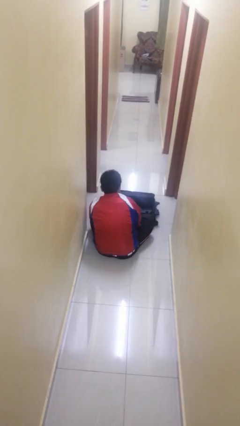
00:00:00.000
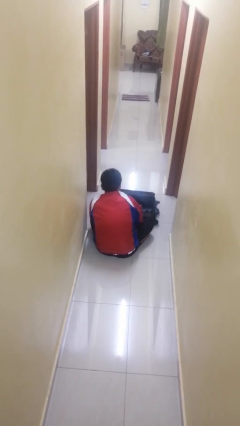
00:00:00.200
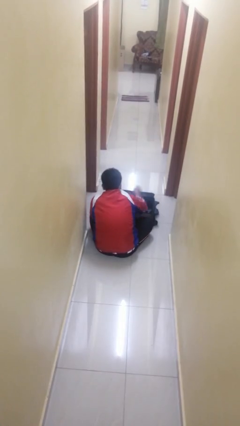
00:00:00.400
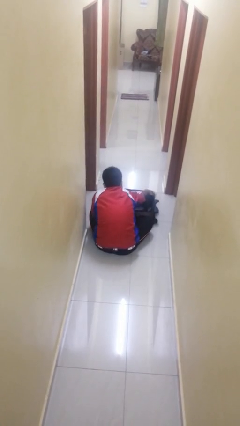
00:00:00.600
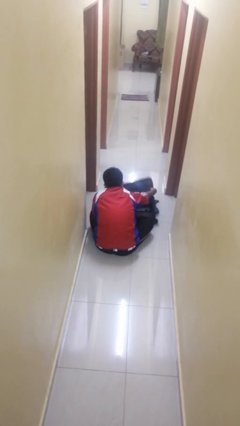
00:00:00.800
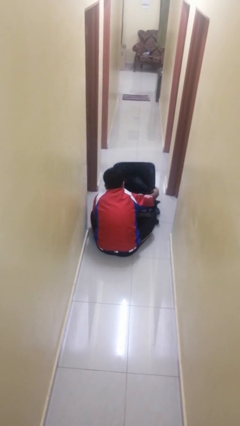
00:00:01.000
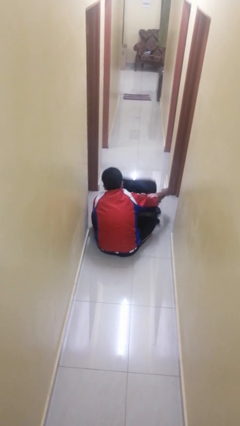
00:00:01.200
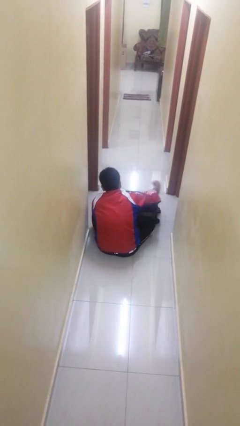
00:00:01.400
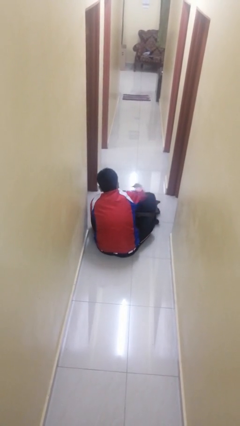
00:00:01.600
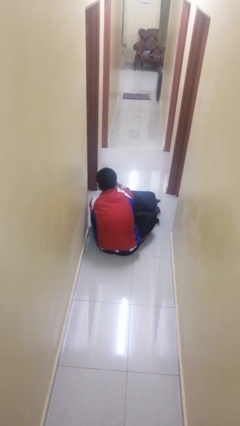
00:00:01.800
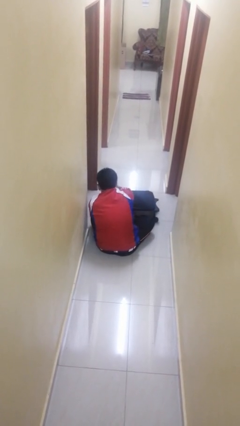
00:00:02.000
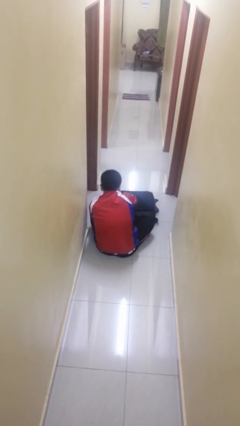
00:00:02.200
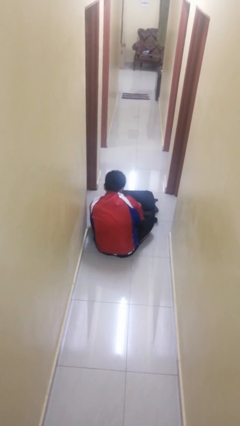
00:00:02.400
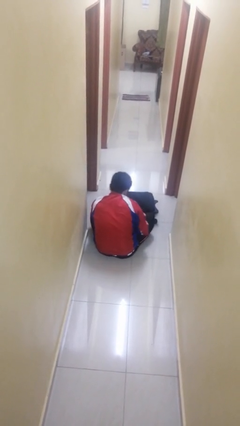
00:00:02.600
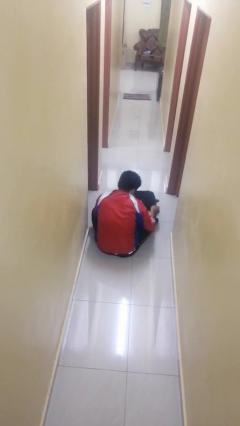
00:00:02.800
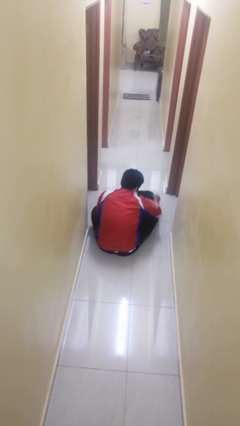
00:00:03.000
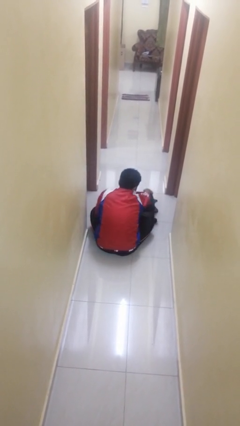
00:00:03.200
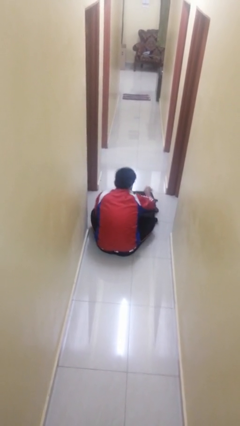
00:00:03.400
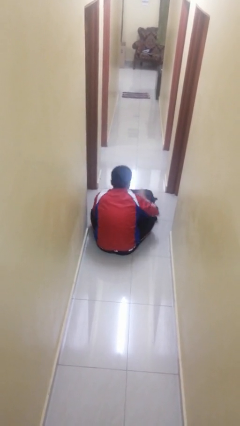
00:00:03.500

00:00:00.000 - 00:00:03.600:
person closes suitcase

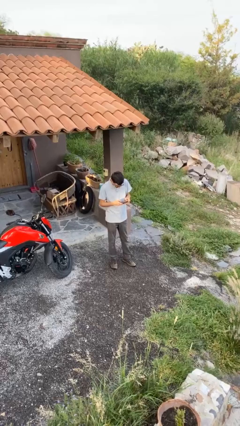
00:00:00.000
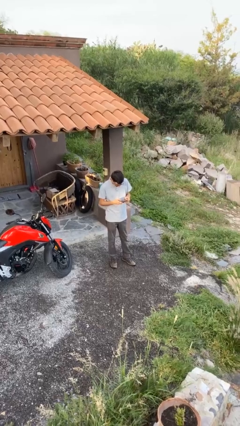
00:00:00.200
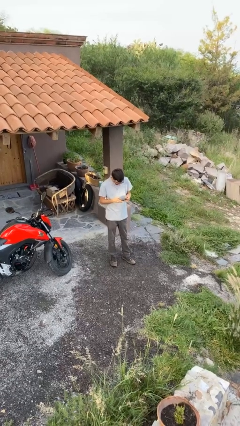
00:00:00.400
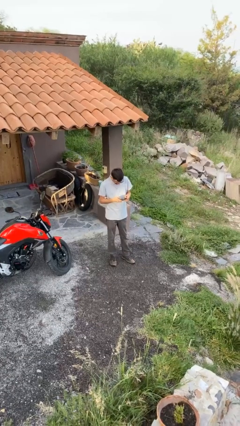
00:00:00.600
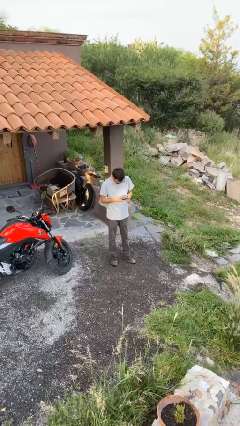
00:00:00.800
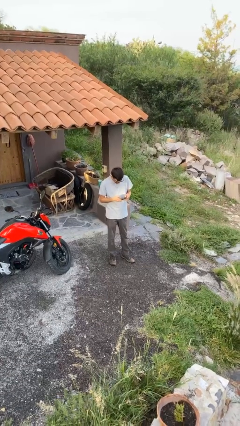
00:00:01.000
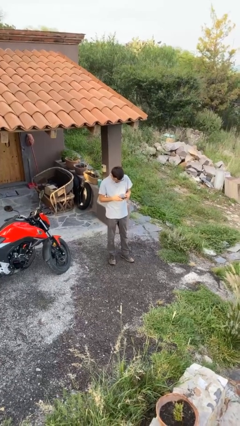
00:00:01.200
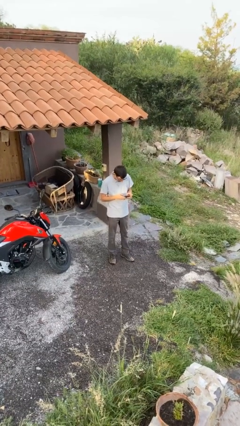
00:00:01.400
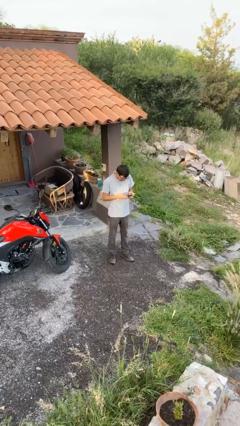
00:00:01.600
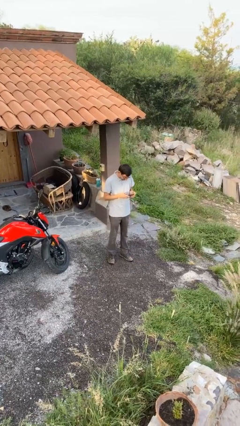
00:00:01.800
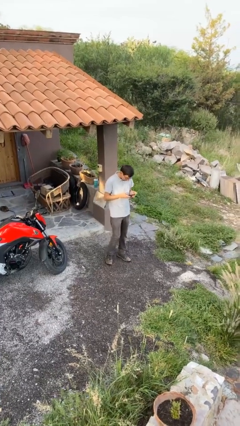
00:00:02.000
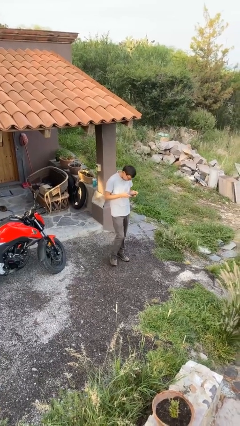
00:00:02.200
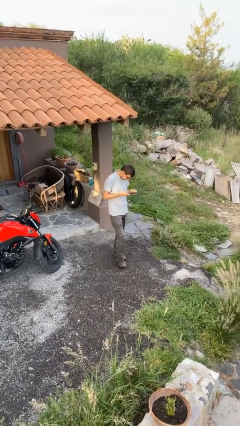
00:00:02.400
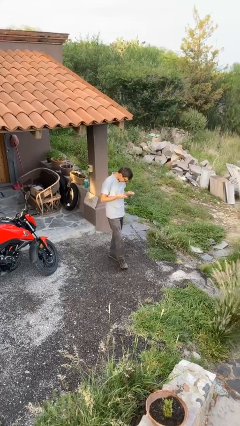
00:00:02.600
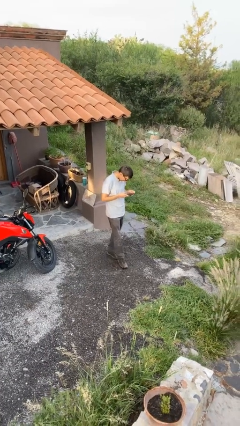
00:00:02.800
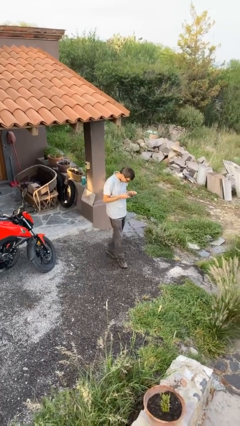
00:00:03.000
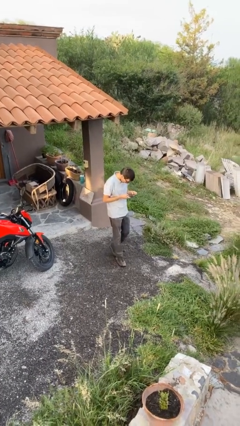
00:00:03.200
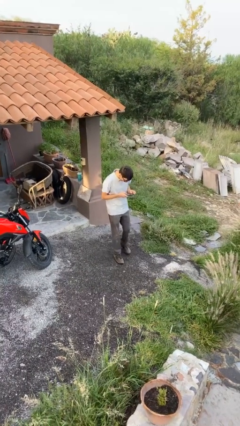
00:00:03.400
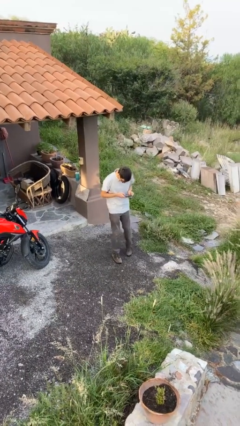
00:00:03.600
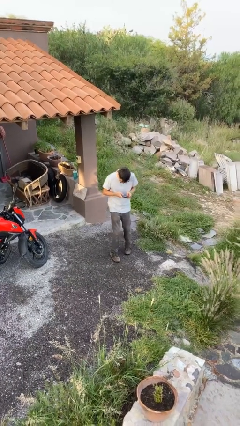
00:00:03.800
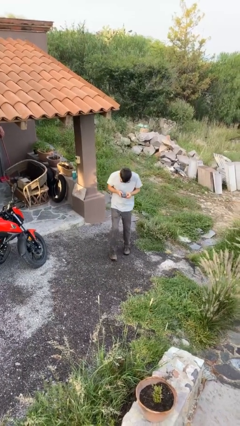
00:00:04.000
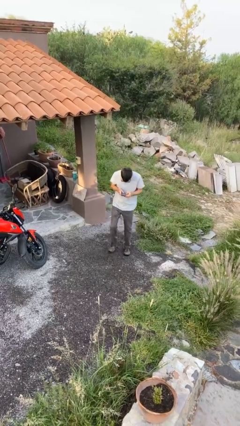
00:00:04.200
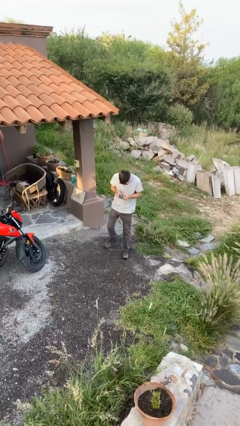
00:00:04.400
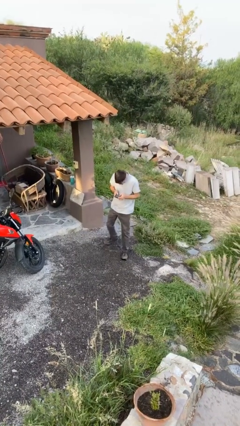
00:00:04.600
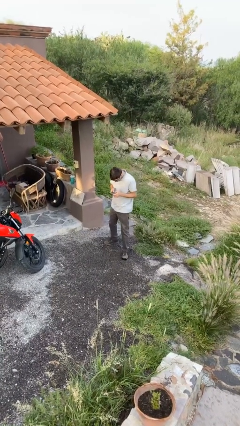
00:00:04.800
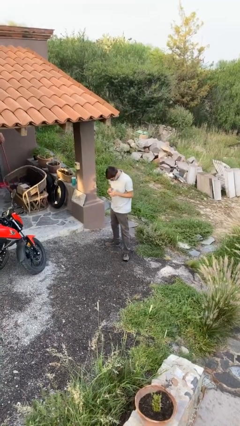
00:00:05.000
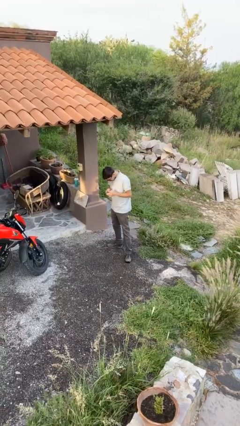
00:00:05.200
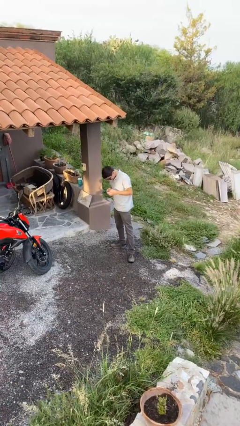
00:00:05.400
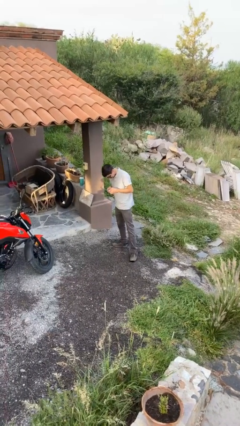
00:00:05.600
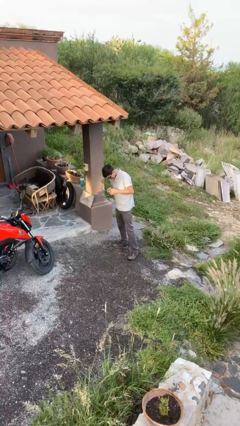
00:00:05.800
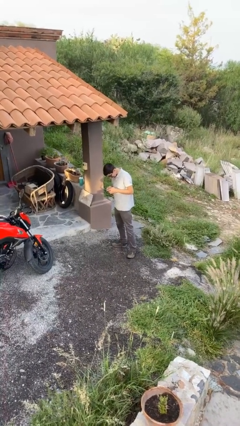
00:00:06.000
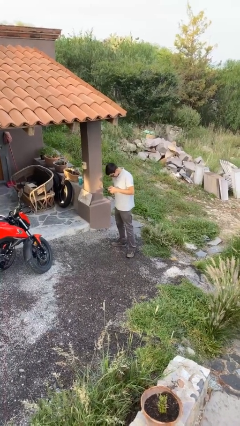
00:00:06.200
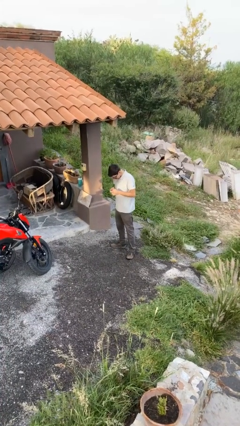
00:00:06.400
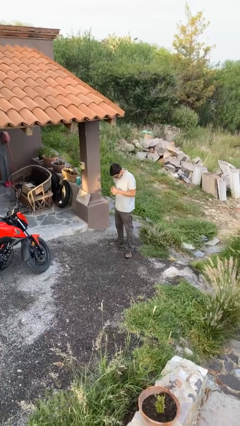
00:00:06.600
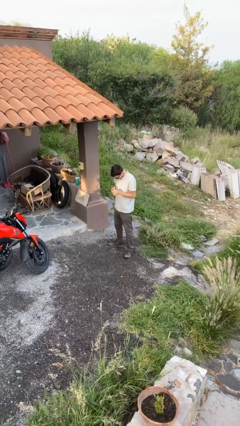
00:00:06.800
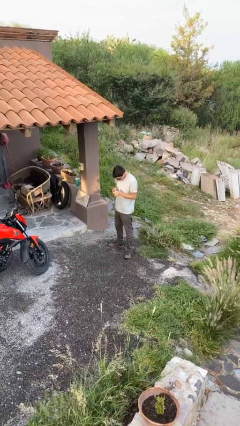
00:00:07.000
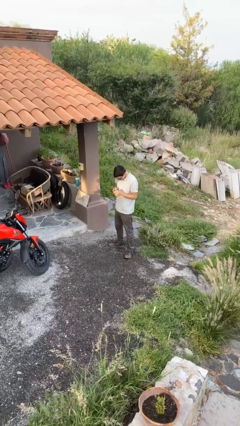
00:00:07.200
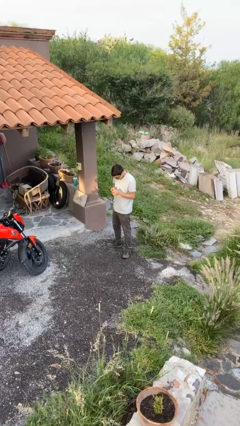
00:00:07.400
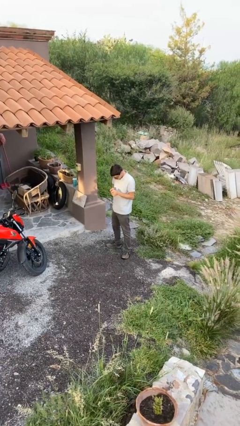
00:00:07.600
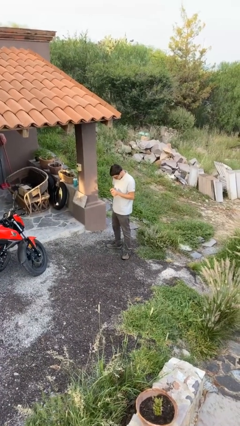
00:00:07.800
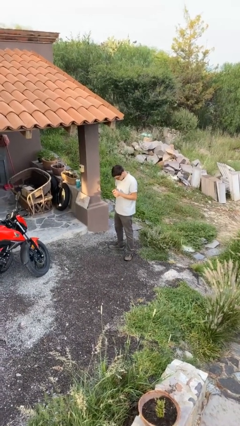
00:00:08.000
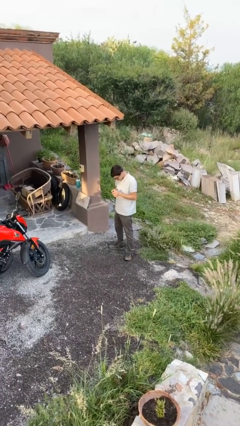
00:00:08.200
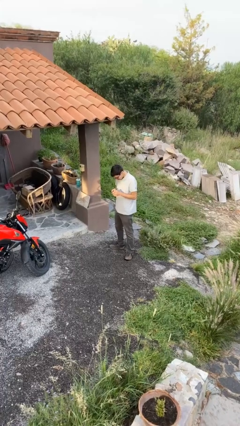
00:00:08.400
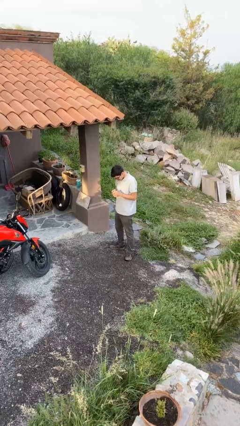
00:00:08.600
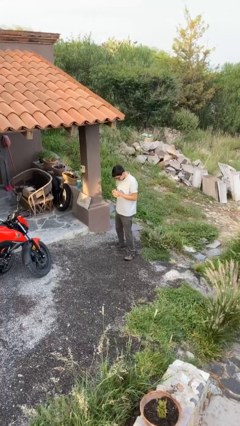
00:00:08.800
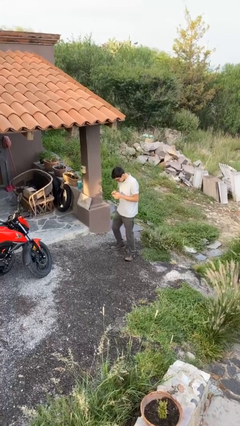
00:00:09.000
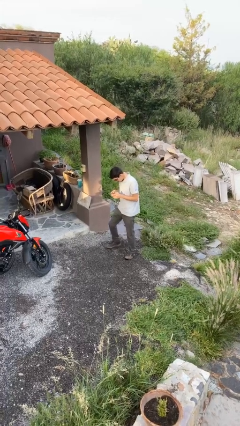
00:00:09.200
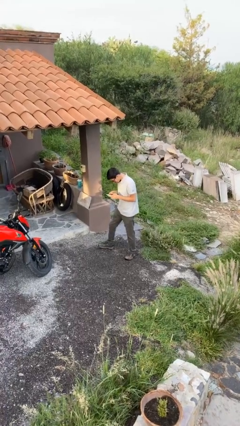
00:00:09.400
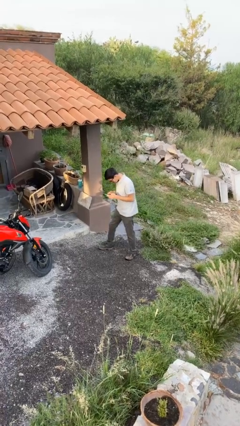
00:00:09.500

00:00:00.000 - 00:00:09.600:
person texts on phone

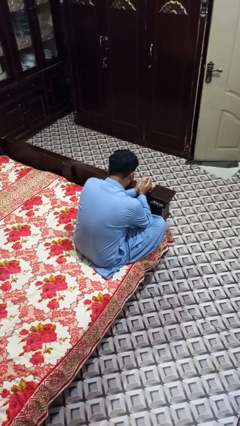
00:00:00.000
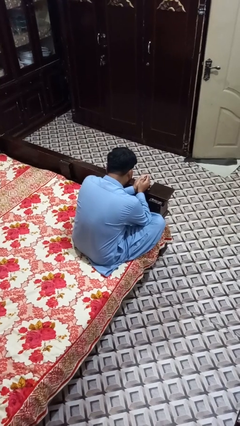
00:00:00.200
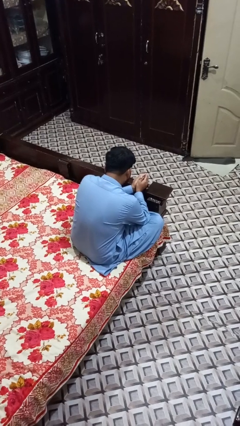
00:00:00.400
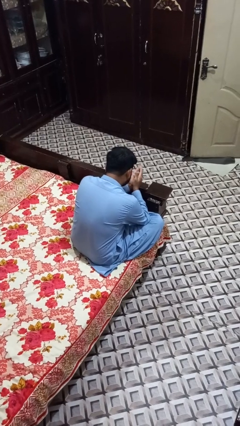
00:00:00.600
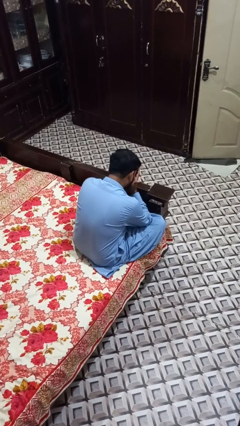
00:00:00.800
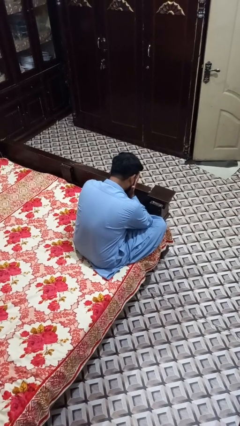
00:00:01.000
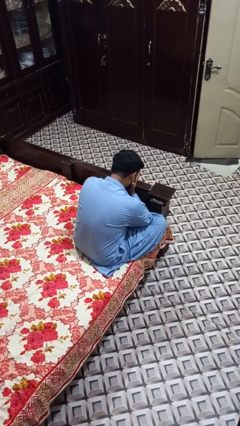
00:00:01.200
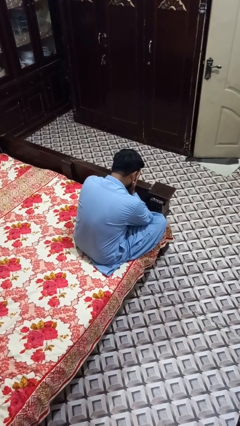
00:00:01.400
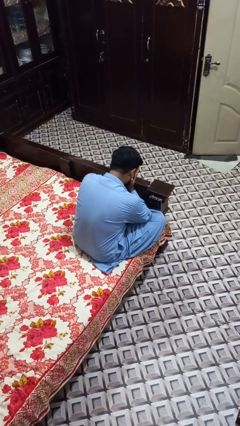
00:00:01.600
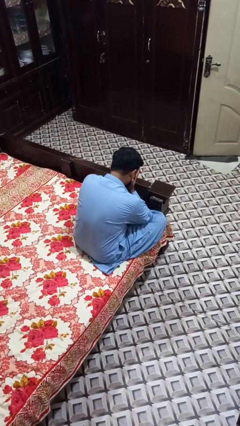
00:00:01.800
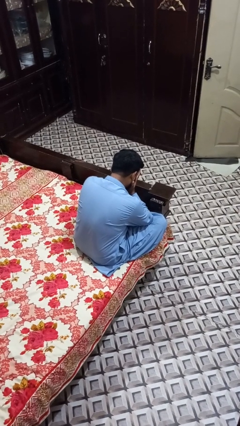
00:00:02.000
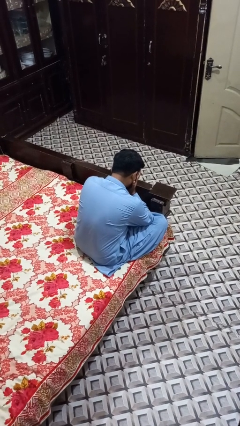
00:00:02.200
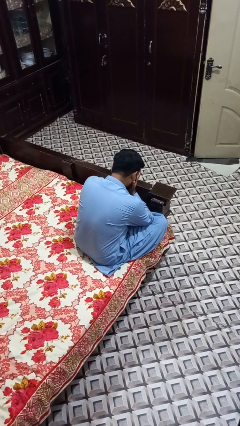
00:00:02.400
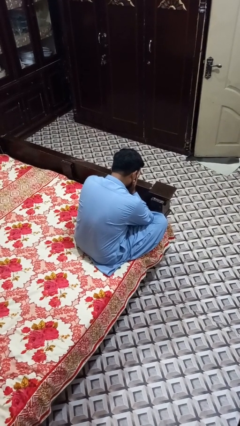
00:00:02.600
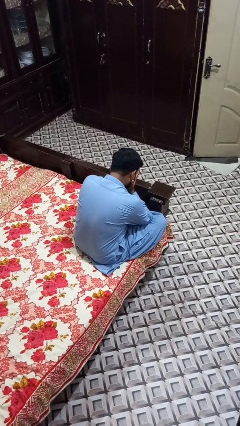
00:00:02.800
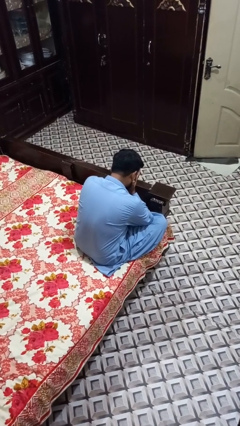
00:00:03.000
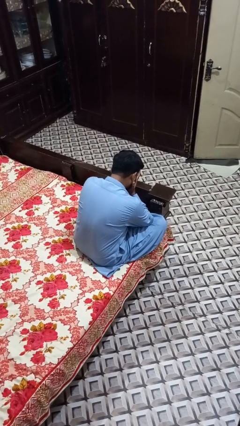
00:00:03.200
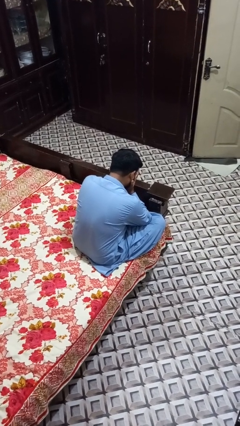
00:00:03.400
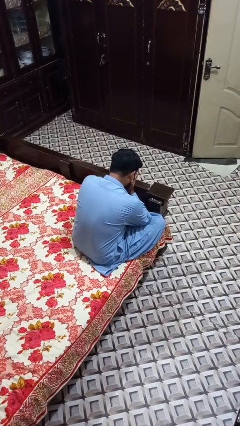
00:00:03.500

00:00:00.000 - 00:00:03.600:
person covers face with hands

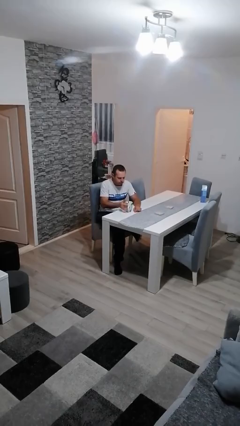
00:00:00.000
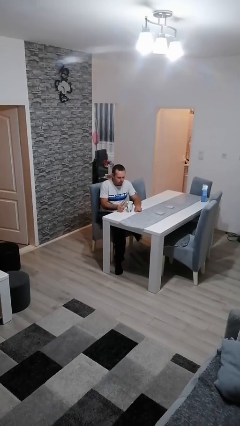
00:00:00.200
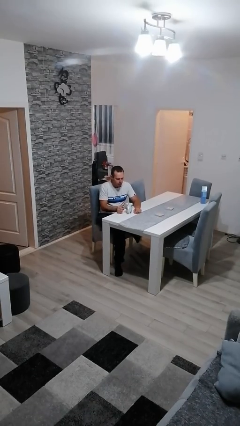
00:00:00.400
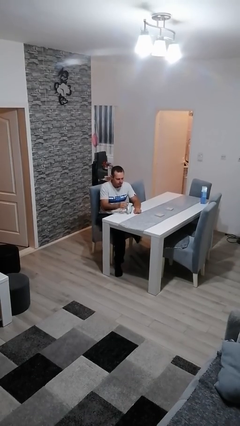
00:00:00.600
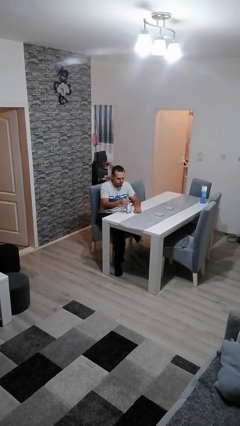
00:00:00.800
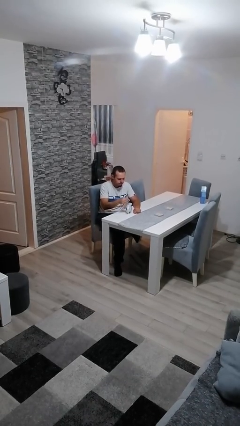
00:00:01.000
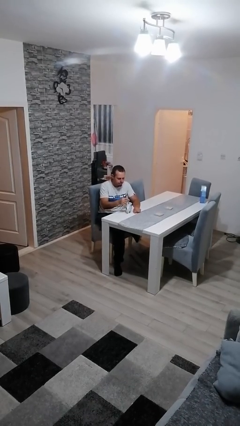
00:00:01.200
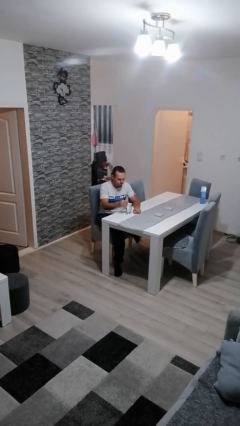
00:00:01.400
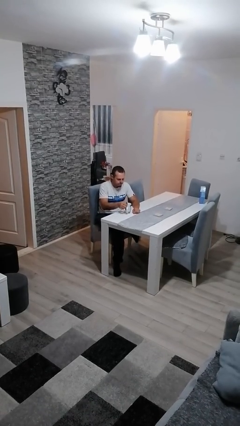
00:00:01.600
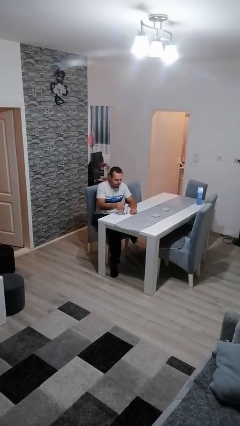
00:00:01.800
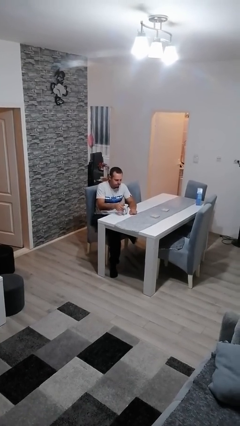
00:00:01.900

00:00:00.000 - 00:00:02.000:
person stirs mug
